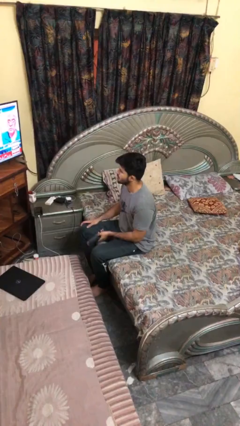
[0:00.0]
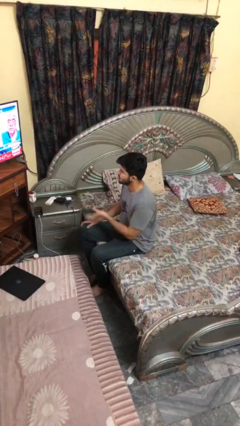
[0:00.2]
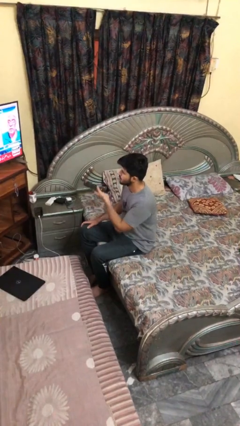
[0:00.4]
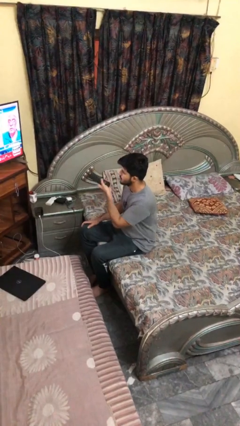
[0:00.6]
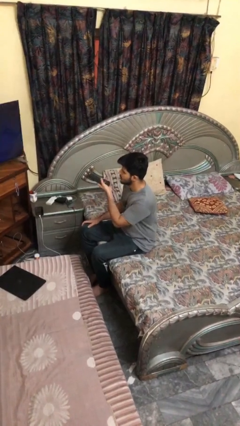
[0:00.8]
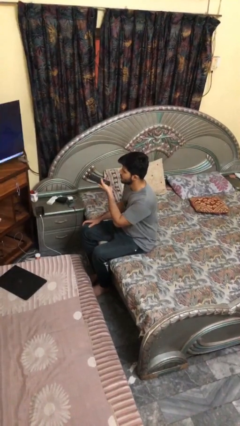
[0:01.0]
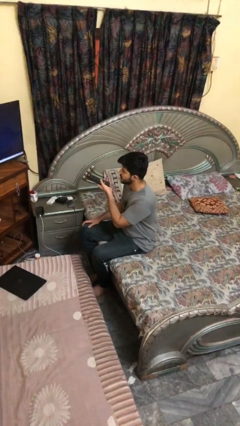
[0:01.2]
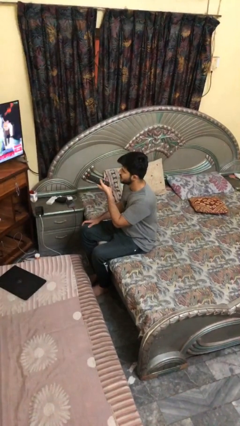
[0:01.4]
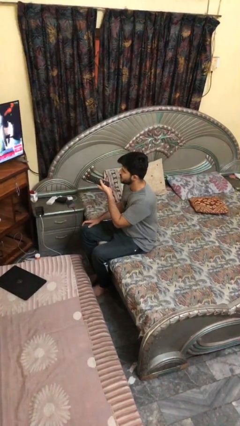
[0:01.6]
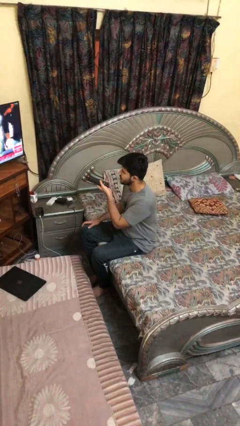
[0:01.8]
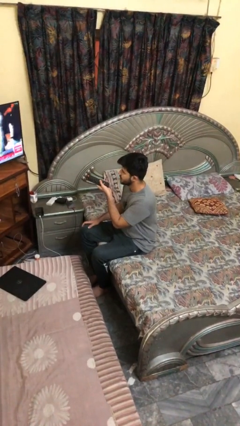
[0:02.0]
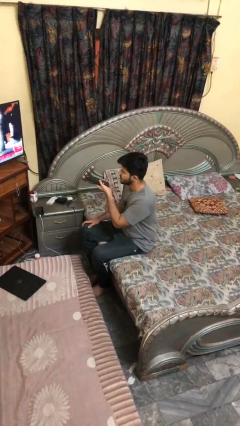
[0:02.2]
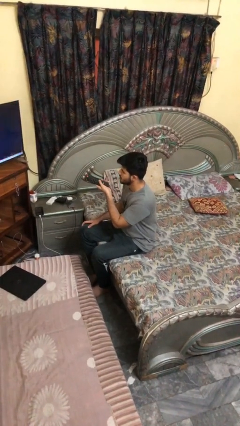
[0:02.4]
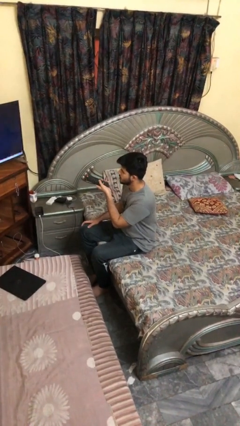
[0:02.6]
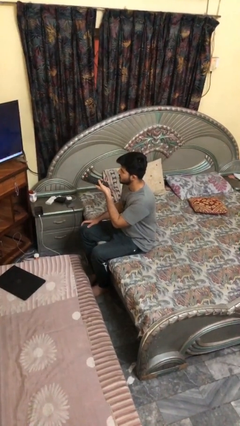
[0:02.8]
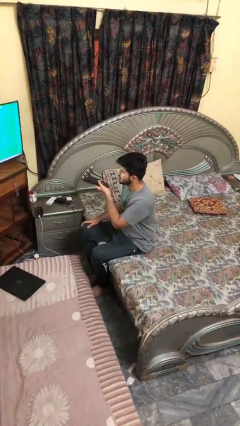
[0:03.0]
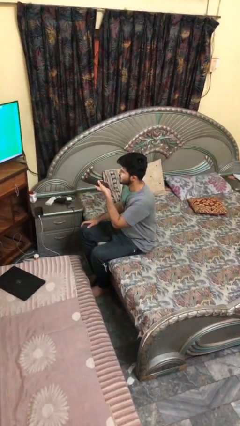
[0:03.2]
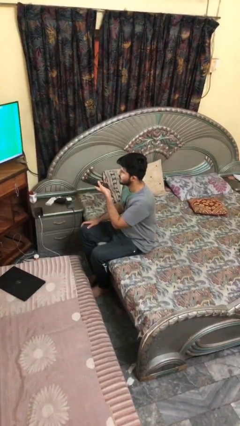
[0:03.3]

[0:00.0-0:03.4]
person uses television remote

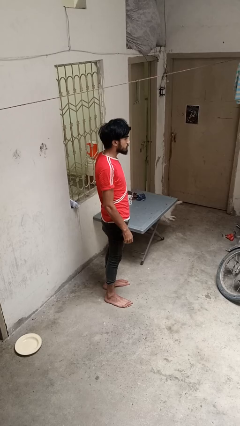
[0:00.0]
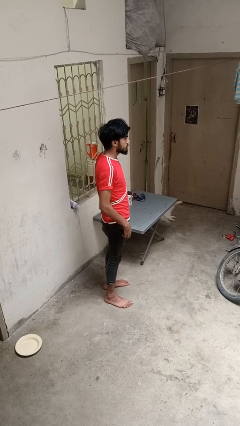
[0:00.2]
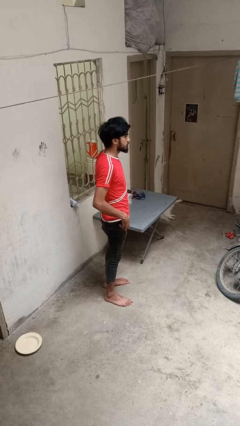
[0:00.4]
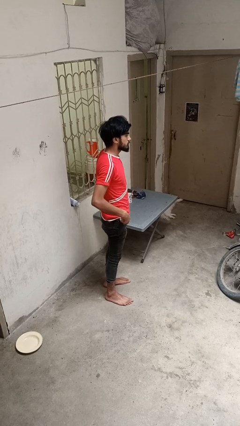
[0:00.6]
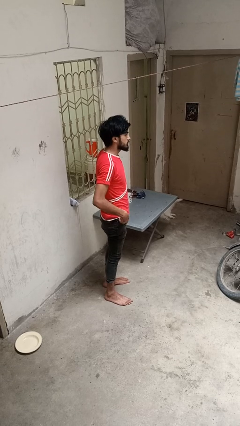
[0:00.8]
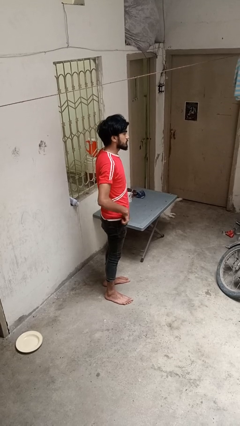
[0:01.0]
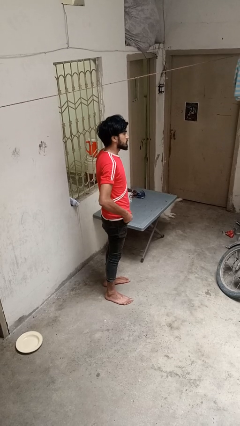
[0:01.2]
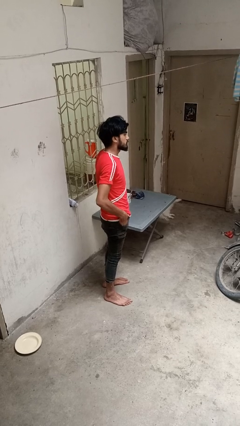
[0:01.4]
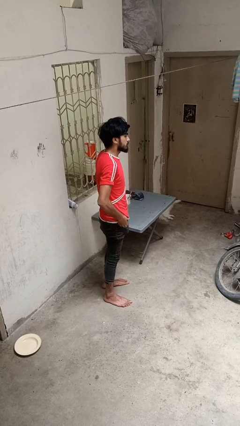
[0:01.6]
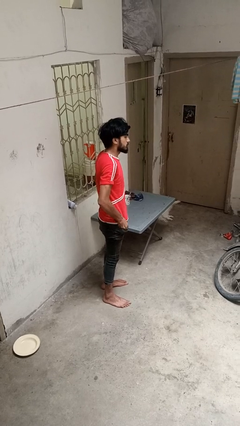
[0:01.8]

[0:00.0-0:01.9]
person puts hands in back pockets

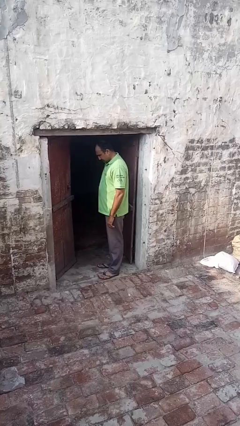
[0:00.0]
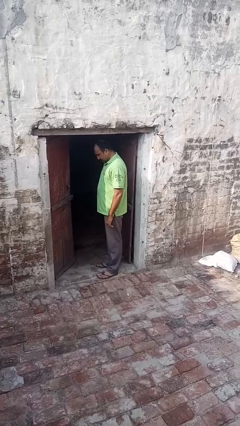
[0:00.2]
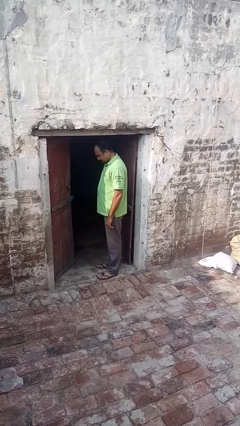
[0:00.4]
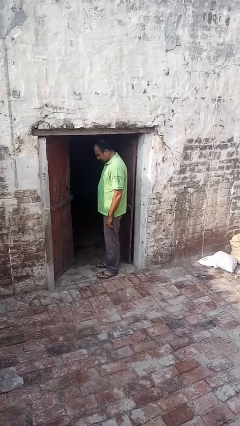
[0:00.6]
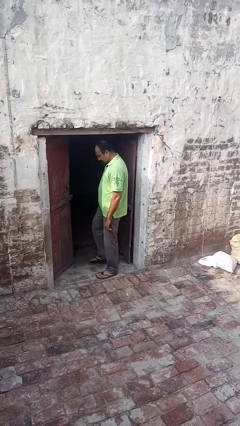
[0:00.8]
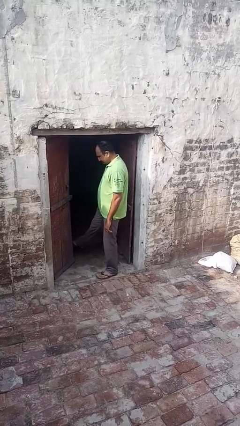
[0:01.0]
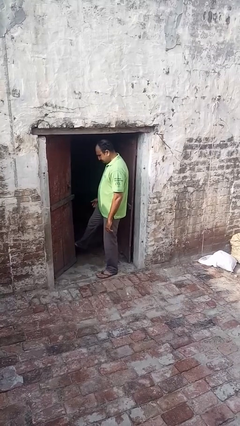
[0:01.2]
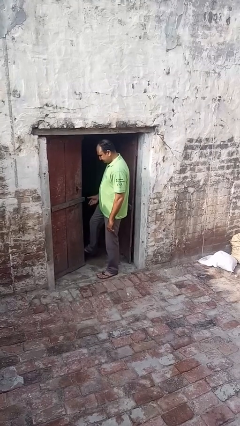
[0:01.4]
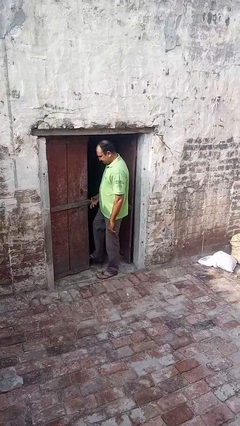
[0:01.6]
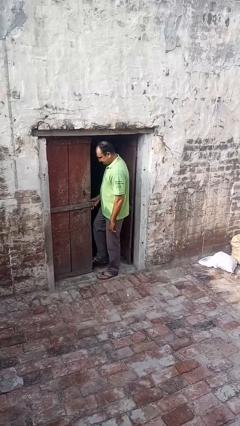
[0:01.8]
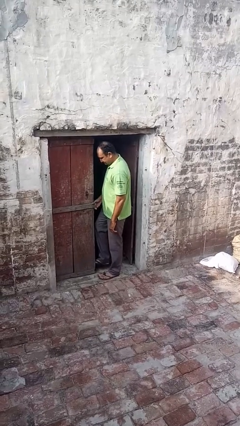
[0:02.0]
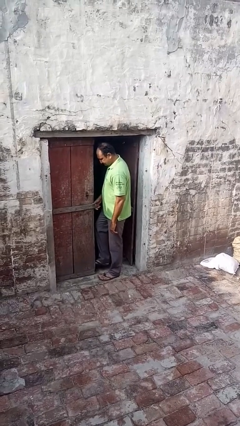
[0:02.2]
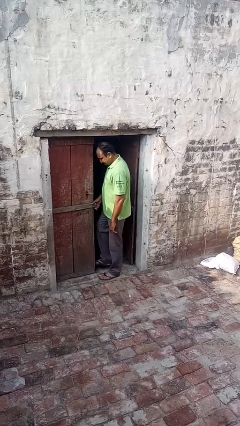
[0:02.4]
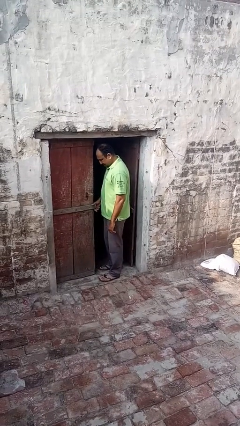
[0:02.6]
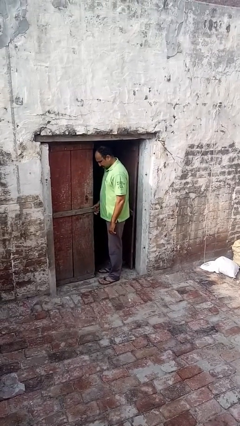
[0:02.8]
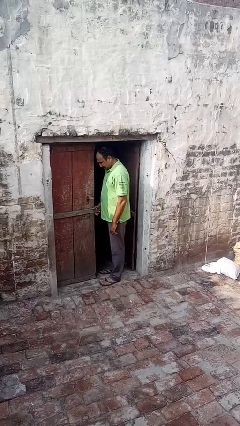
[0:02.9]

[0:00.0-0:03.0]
person closes door with foot

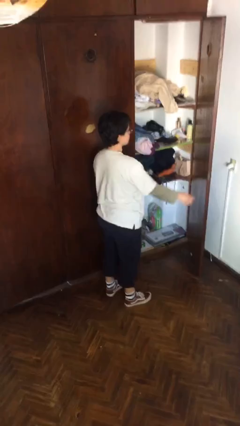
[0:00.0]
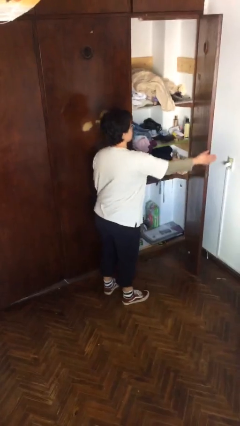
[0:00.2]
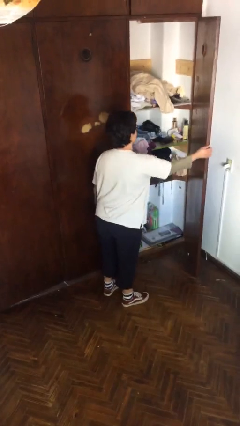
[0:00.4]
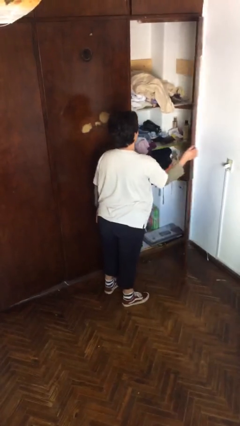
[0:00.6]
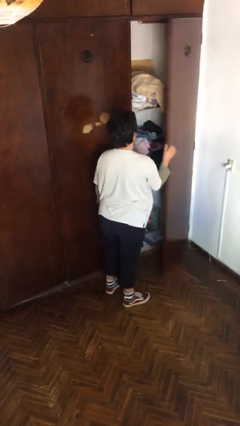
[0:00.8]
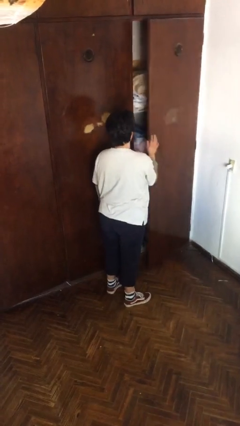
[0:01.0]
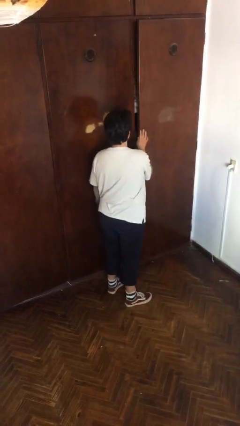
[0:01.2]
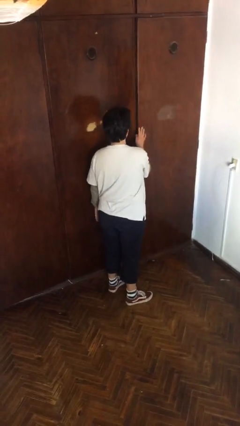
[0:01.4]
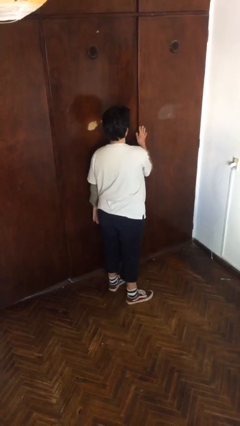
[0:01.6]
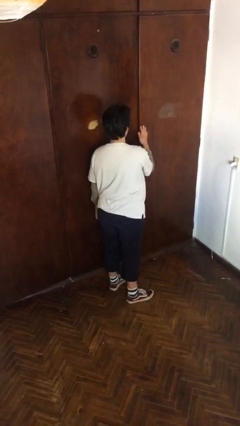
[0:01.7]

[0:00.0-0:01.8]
person closes closet door

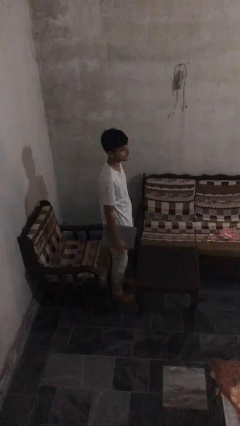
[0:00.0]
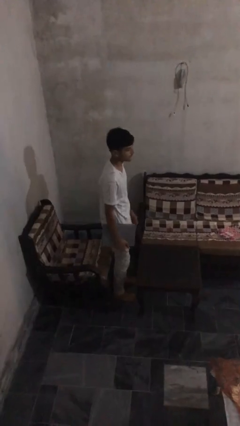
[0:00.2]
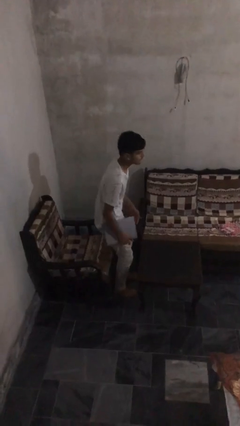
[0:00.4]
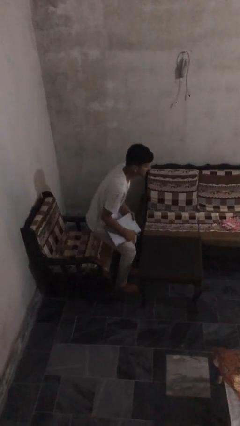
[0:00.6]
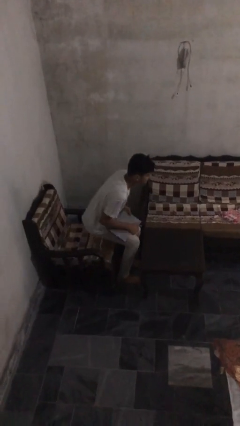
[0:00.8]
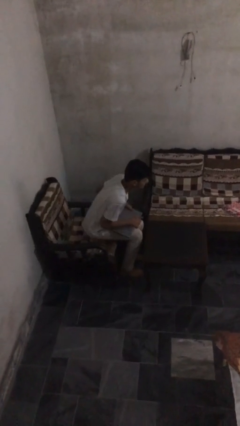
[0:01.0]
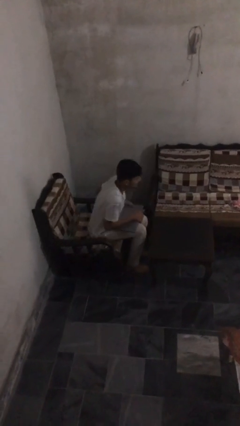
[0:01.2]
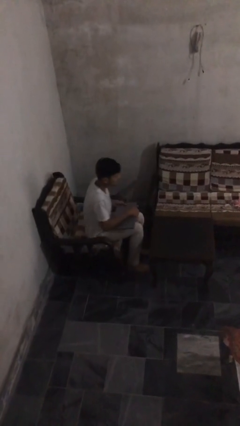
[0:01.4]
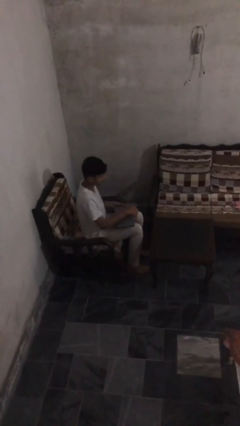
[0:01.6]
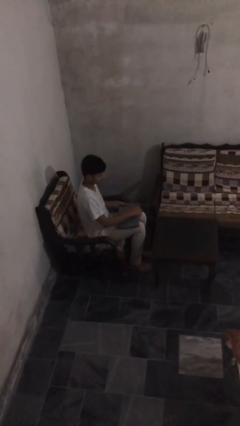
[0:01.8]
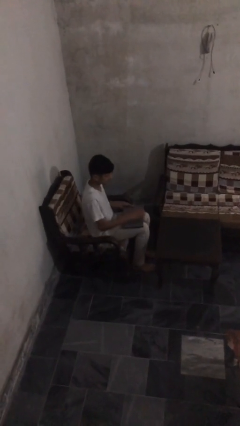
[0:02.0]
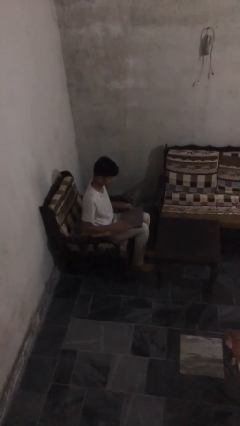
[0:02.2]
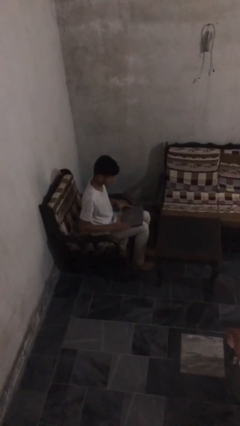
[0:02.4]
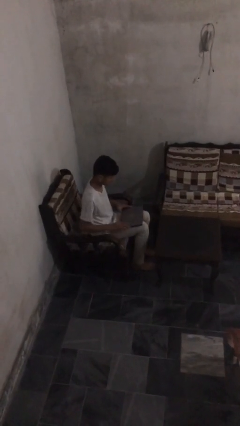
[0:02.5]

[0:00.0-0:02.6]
person sits down

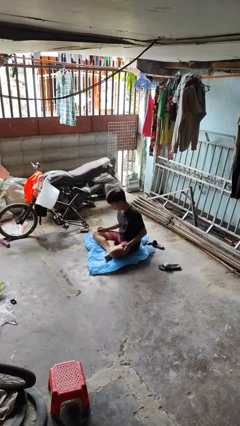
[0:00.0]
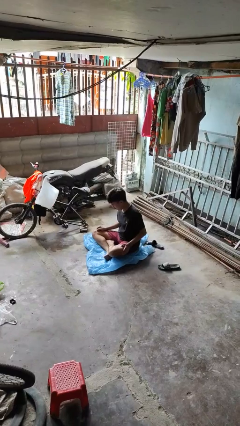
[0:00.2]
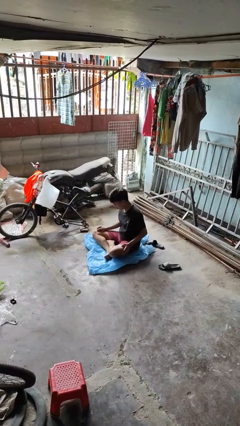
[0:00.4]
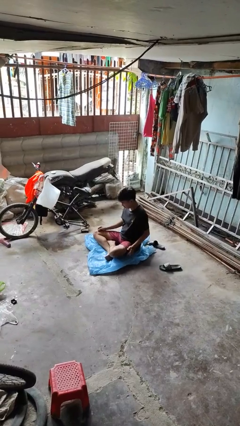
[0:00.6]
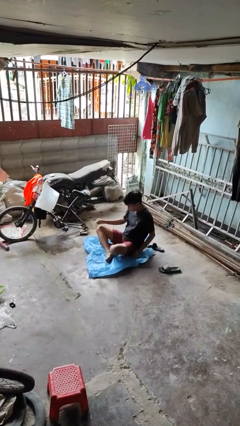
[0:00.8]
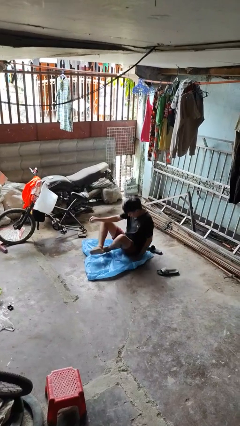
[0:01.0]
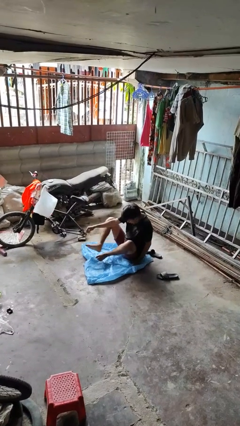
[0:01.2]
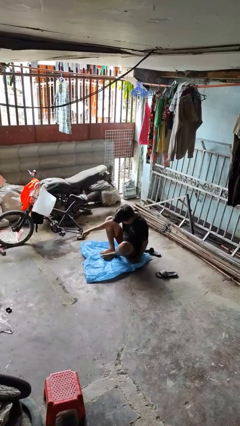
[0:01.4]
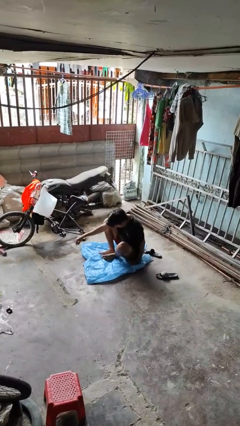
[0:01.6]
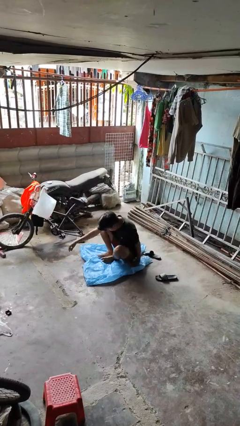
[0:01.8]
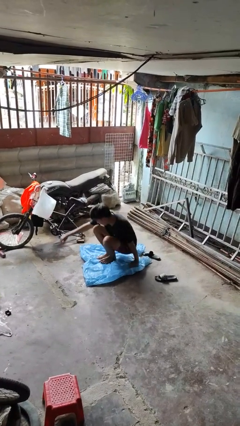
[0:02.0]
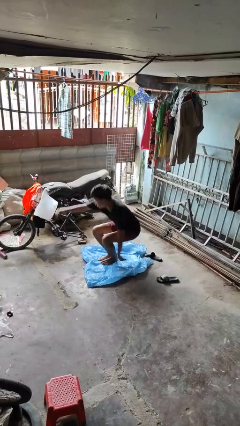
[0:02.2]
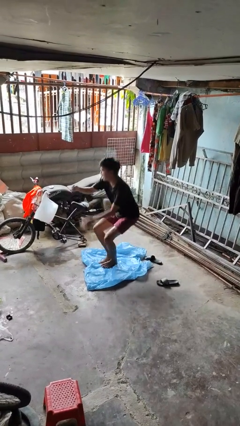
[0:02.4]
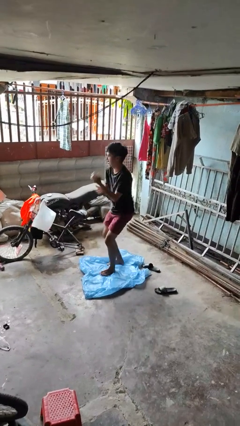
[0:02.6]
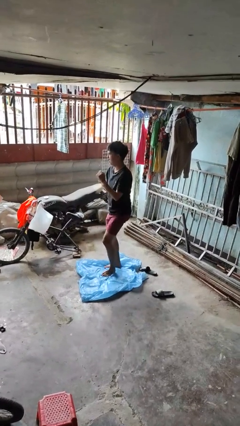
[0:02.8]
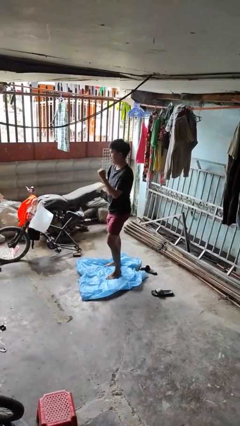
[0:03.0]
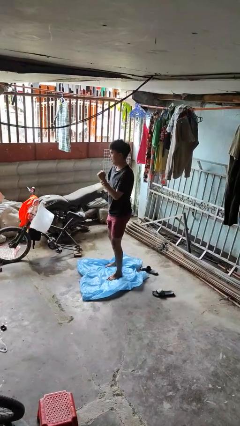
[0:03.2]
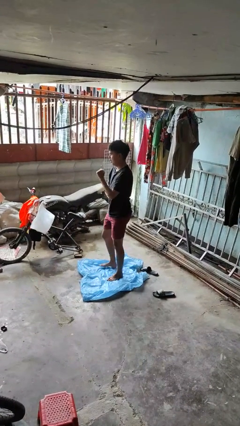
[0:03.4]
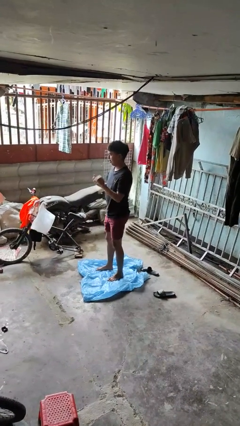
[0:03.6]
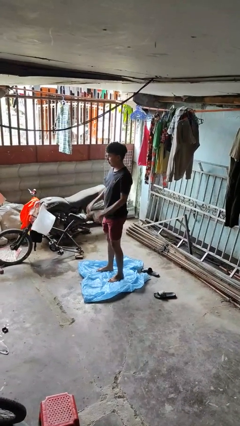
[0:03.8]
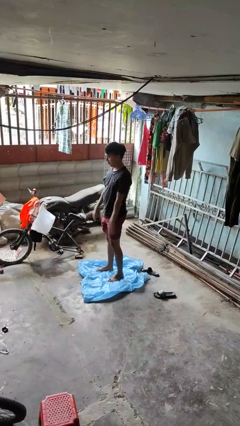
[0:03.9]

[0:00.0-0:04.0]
person stands up from floor

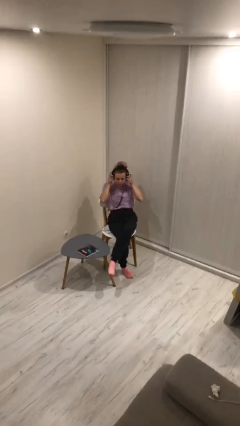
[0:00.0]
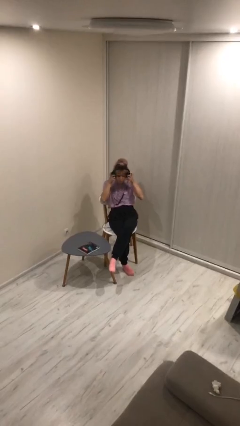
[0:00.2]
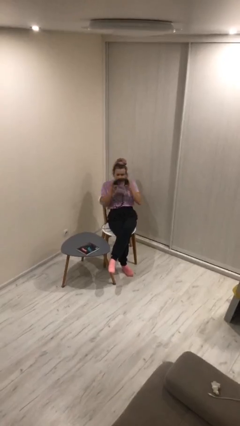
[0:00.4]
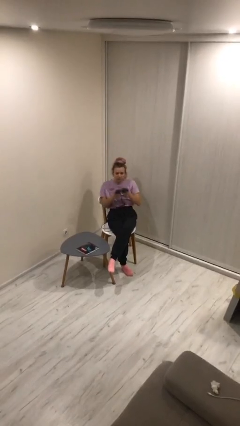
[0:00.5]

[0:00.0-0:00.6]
person takes off headphones
